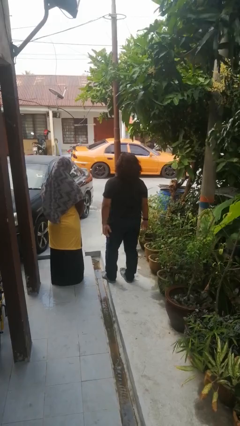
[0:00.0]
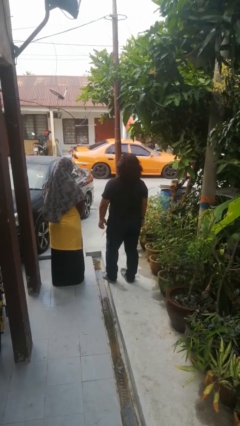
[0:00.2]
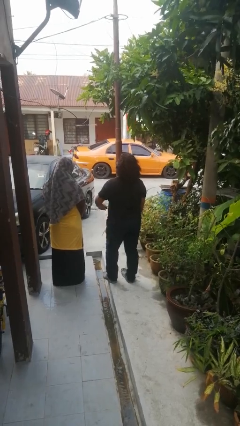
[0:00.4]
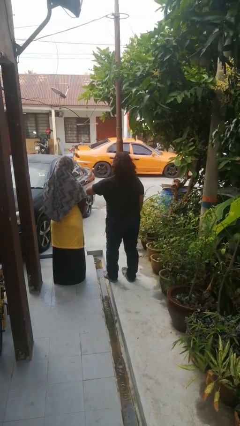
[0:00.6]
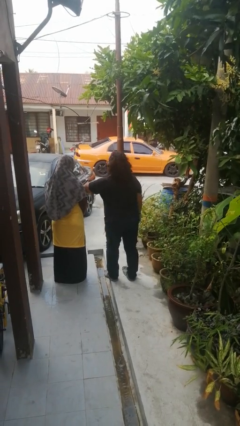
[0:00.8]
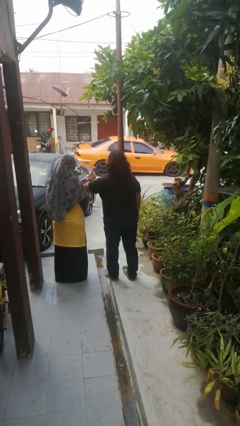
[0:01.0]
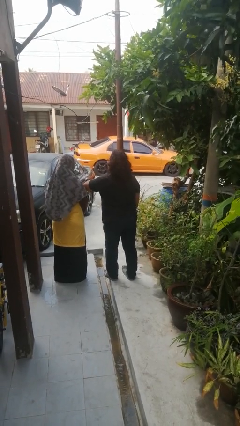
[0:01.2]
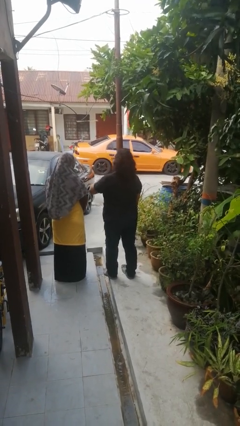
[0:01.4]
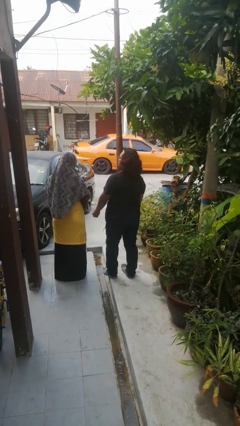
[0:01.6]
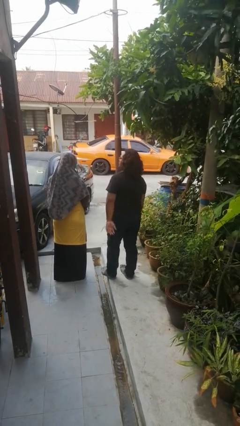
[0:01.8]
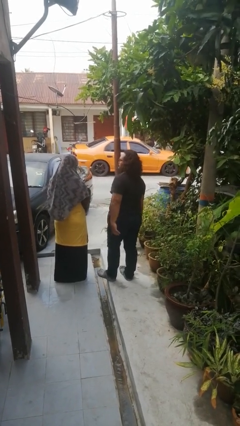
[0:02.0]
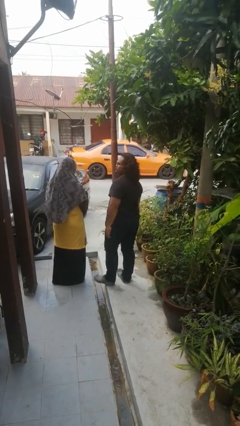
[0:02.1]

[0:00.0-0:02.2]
person nudges person with elbow

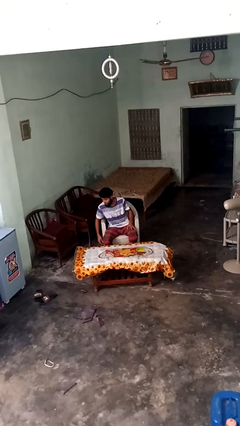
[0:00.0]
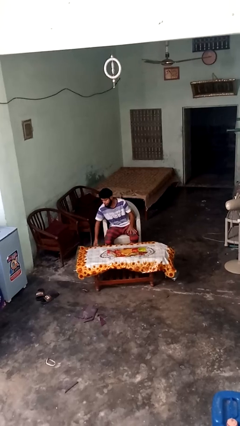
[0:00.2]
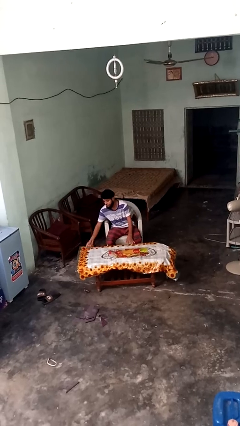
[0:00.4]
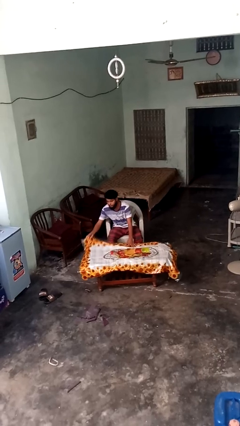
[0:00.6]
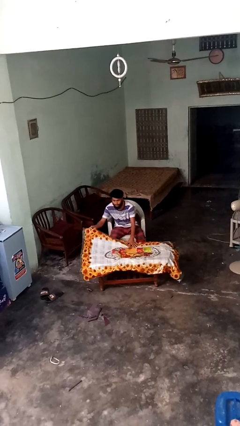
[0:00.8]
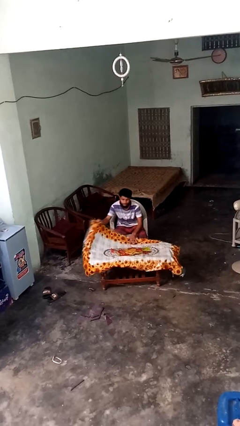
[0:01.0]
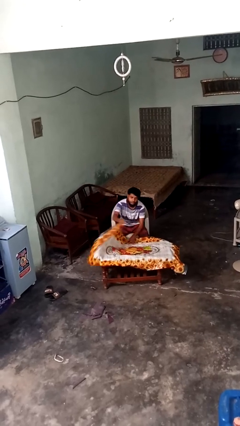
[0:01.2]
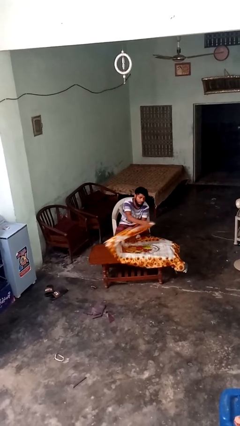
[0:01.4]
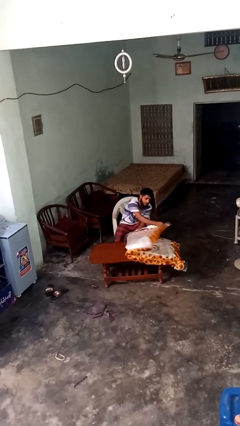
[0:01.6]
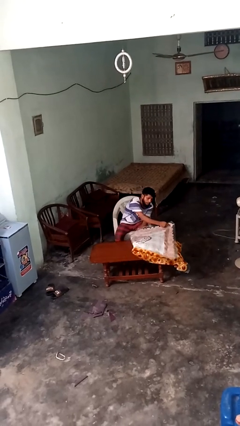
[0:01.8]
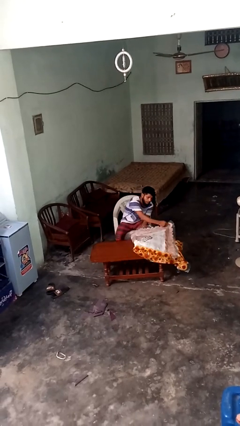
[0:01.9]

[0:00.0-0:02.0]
person folds tablecloth

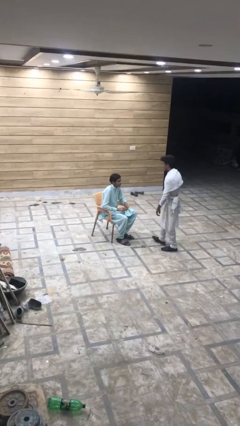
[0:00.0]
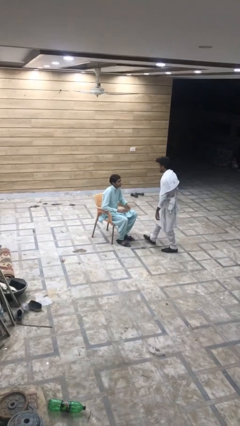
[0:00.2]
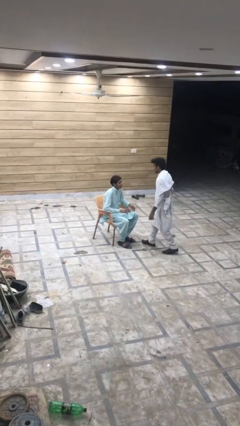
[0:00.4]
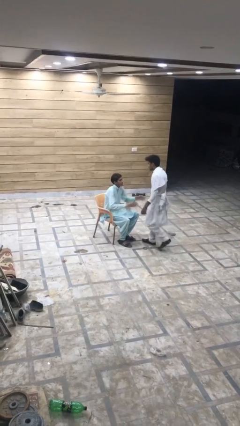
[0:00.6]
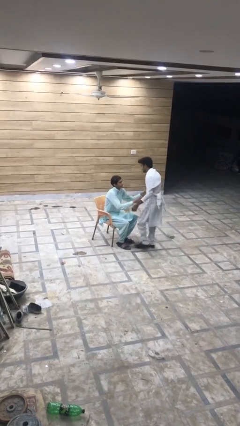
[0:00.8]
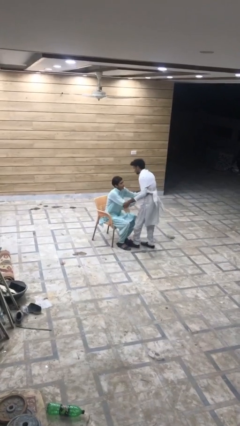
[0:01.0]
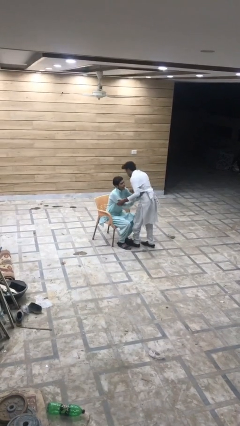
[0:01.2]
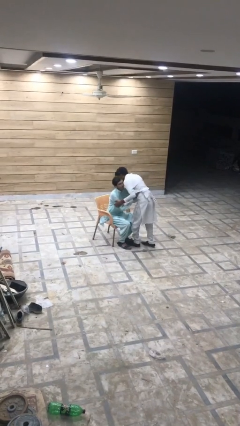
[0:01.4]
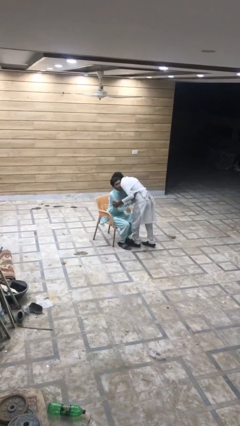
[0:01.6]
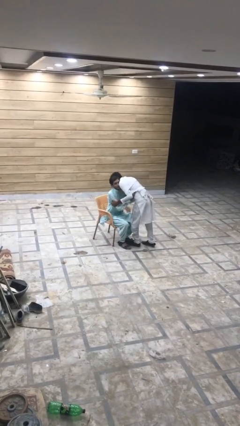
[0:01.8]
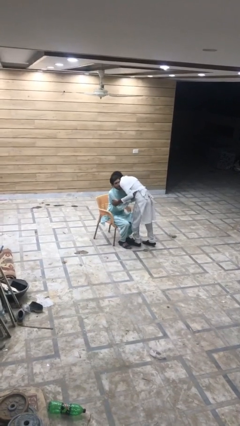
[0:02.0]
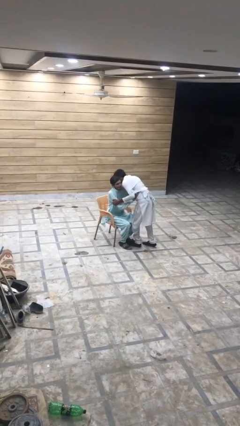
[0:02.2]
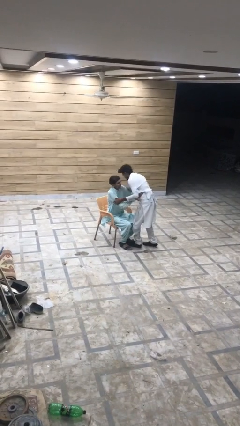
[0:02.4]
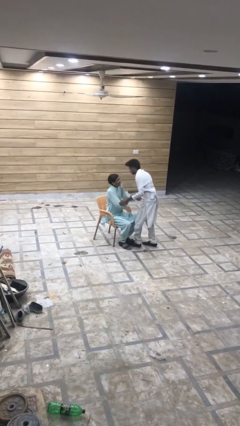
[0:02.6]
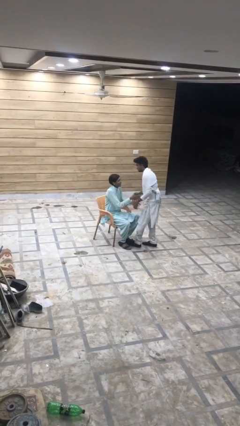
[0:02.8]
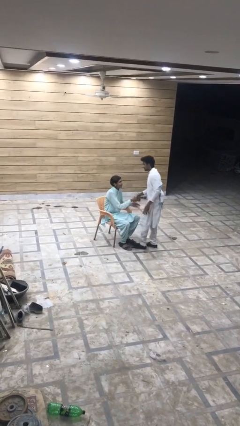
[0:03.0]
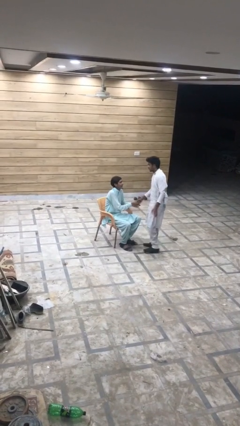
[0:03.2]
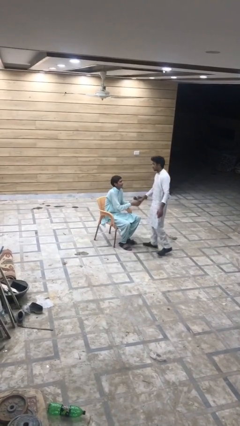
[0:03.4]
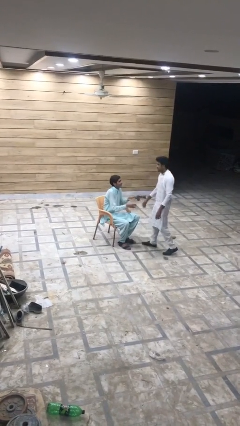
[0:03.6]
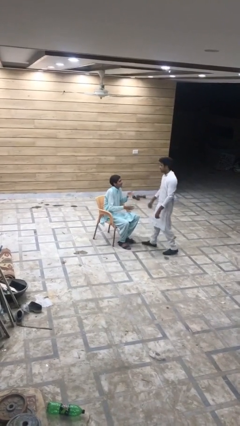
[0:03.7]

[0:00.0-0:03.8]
person embraces person

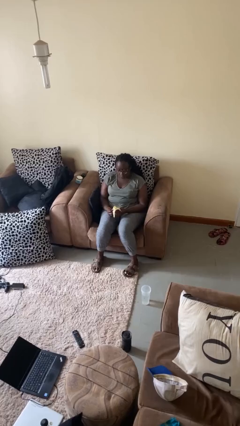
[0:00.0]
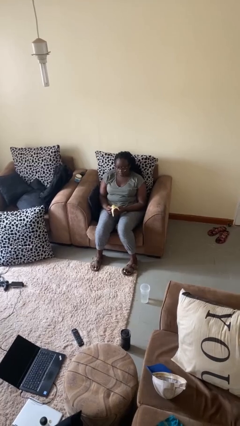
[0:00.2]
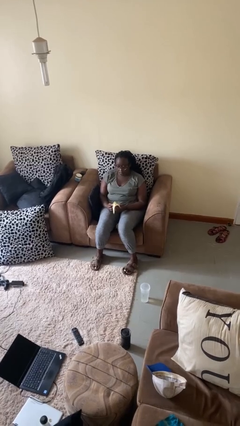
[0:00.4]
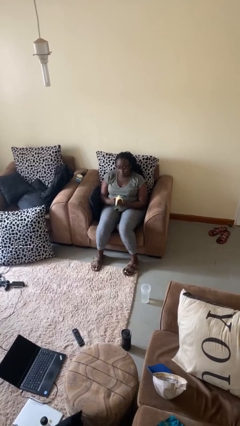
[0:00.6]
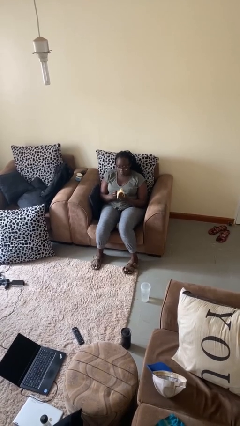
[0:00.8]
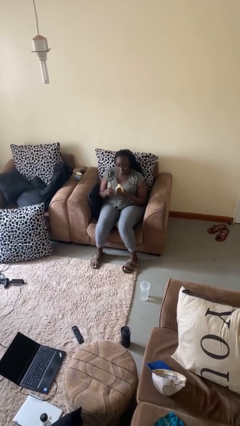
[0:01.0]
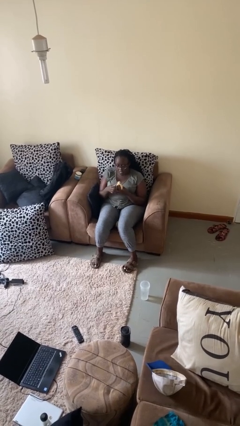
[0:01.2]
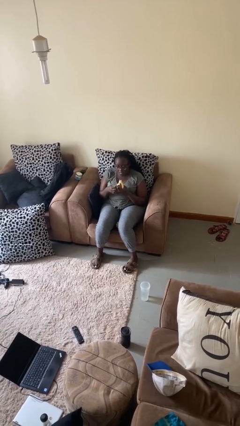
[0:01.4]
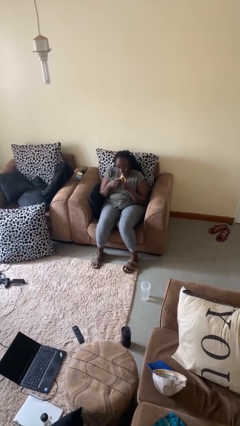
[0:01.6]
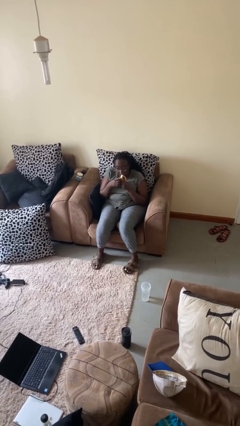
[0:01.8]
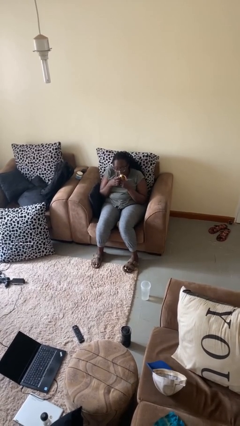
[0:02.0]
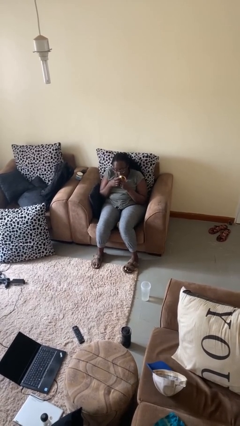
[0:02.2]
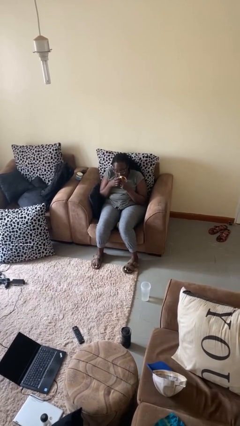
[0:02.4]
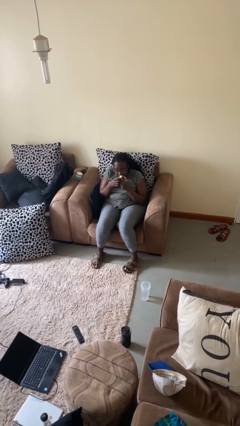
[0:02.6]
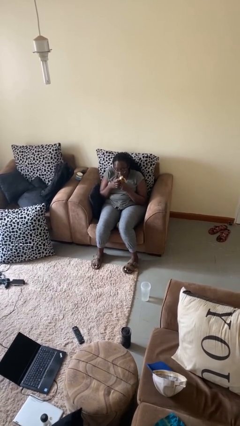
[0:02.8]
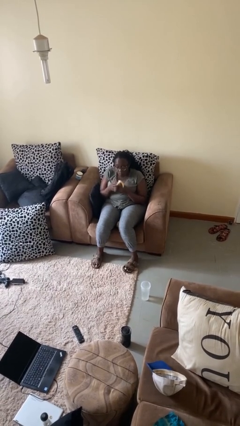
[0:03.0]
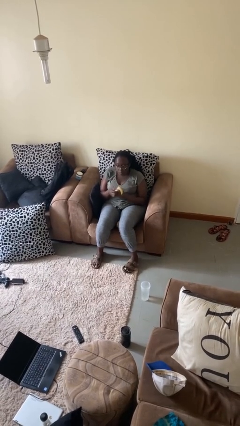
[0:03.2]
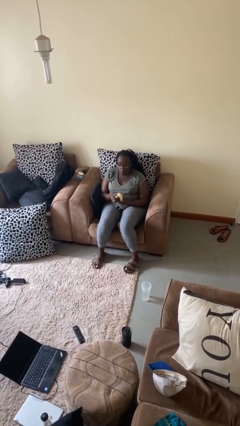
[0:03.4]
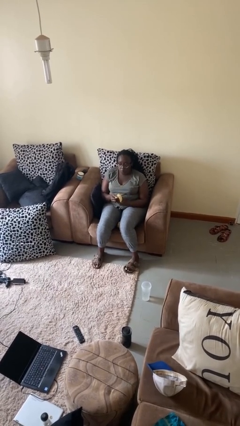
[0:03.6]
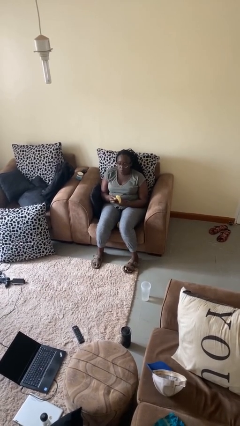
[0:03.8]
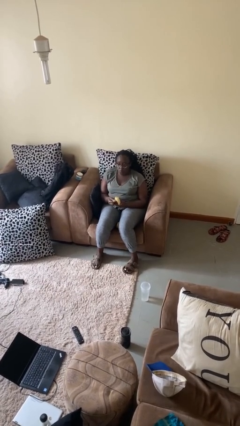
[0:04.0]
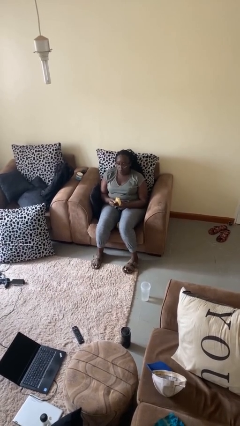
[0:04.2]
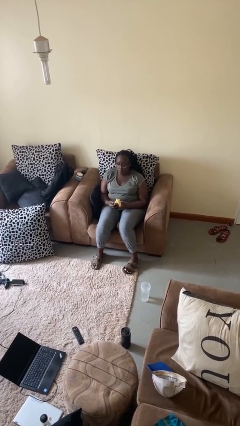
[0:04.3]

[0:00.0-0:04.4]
person eats banana

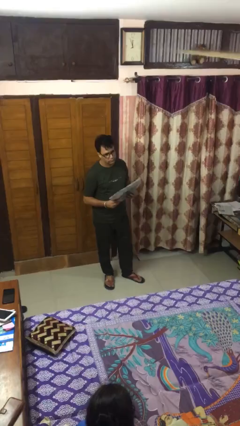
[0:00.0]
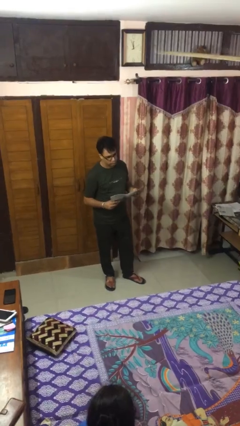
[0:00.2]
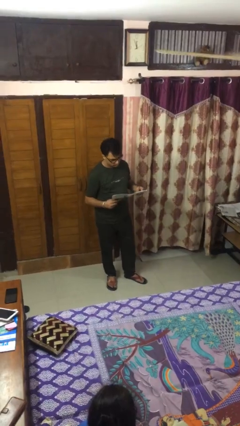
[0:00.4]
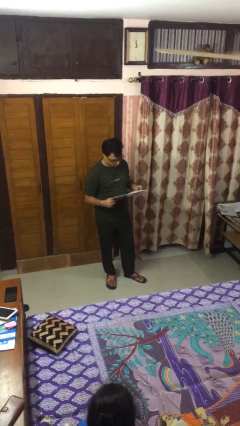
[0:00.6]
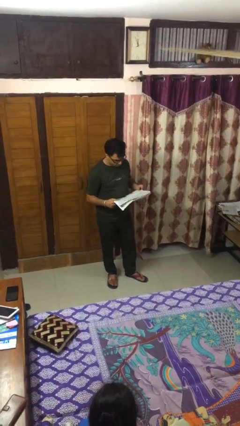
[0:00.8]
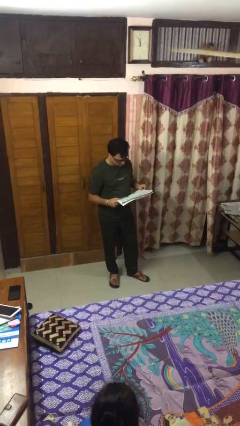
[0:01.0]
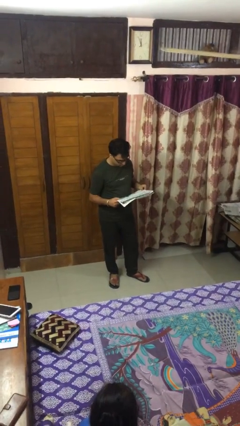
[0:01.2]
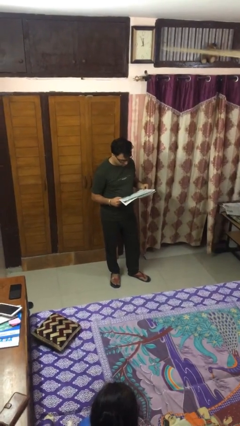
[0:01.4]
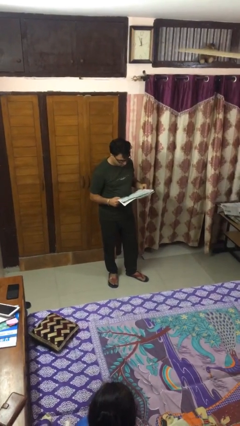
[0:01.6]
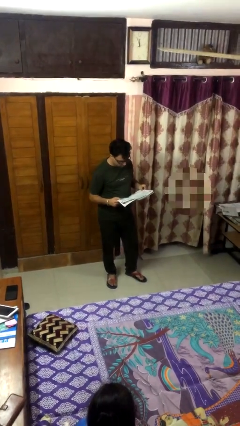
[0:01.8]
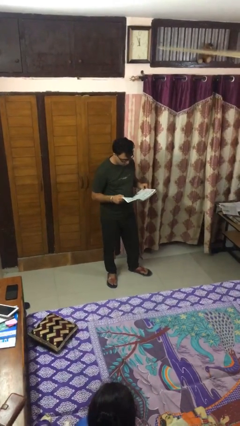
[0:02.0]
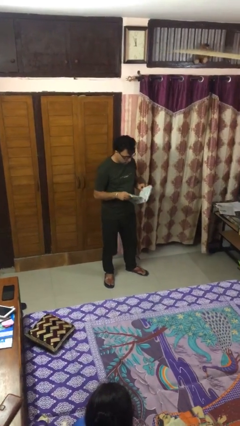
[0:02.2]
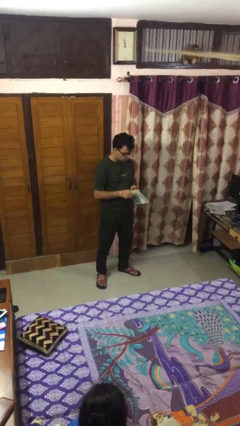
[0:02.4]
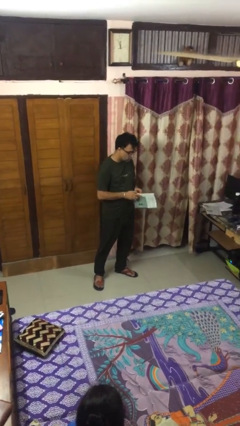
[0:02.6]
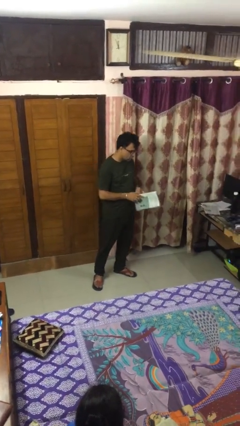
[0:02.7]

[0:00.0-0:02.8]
person reads newspaper

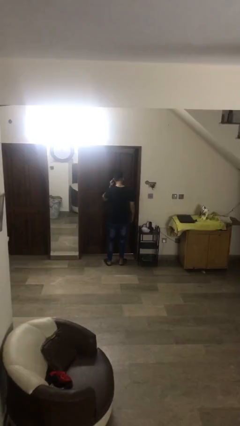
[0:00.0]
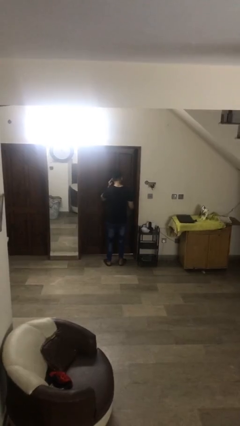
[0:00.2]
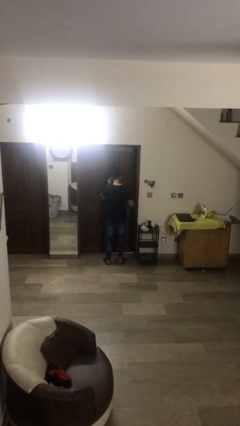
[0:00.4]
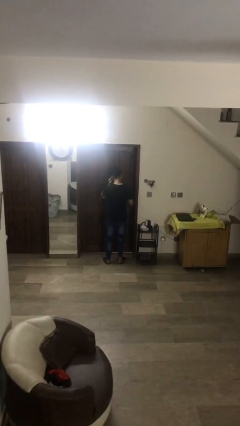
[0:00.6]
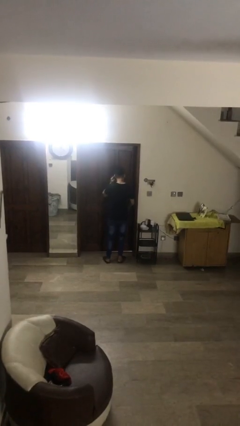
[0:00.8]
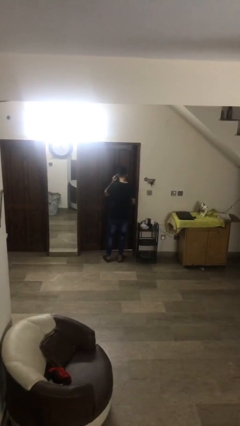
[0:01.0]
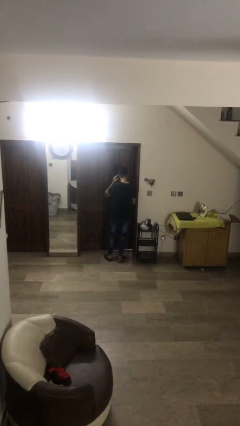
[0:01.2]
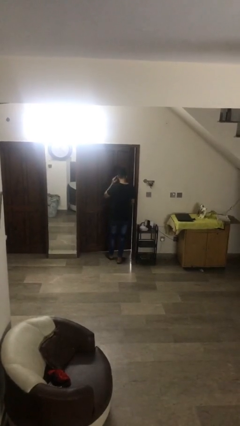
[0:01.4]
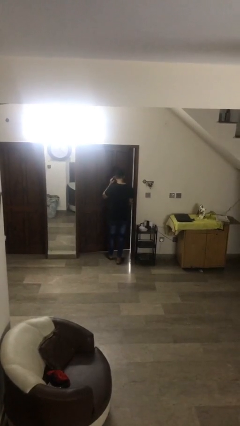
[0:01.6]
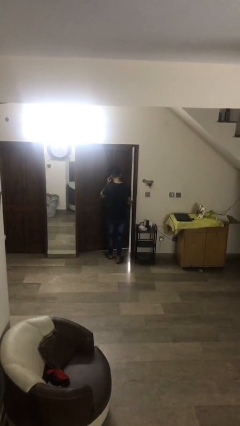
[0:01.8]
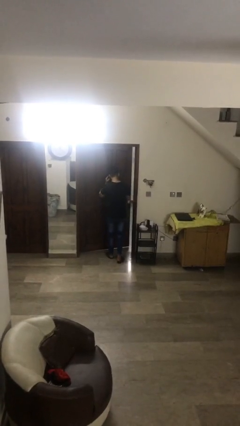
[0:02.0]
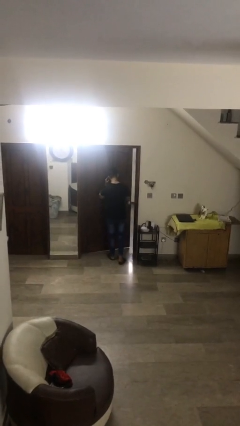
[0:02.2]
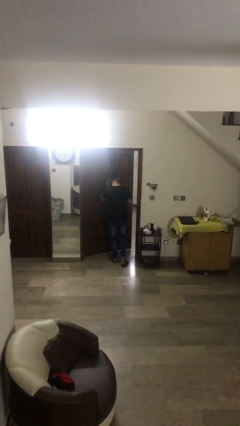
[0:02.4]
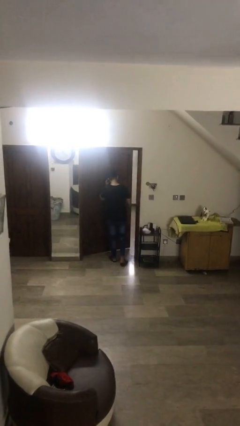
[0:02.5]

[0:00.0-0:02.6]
person opens facility door
